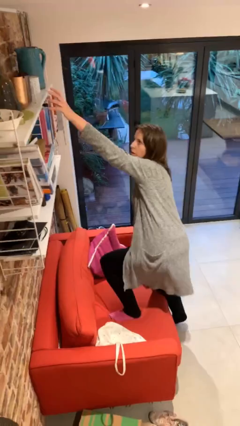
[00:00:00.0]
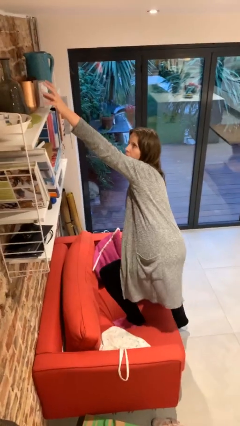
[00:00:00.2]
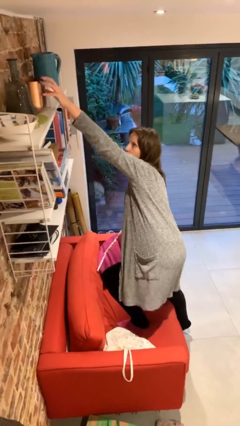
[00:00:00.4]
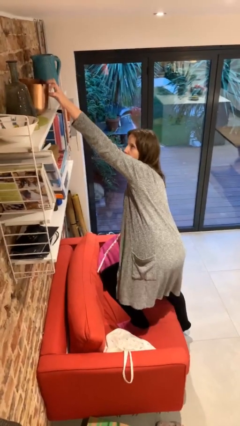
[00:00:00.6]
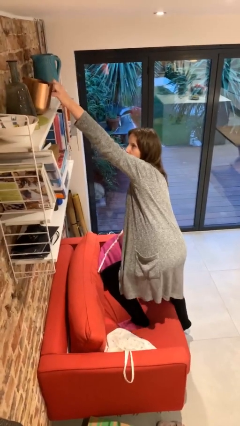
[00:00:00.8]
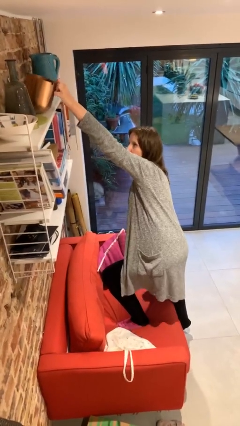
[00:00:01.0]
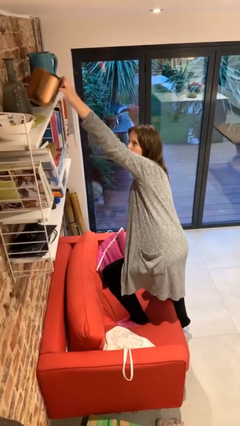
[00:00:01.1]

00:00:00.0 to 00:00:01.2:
person picks up object from shelf

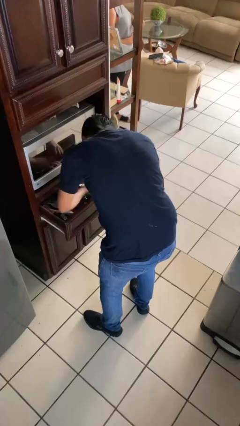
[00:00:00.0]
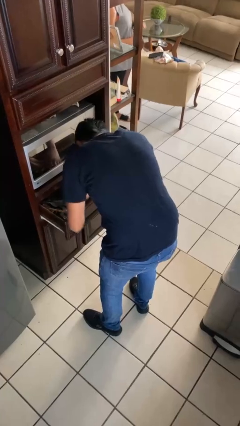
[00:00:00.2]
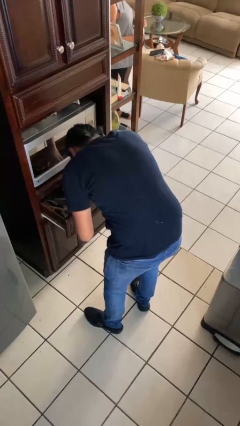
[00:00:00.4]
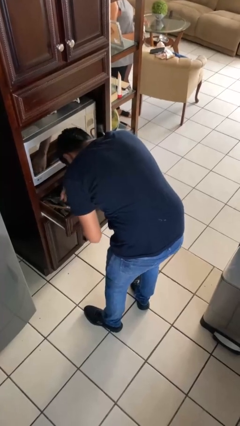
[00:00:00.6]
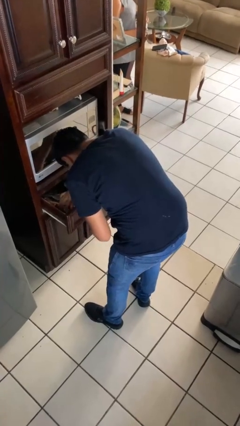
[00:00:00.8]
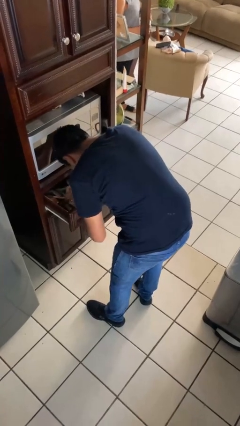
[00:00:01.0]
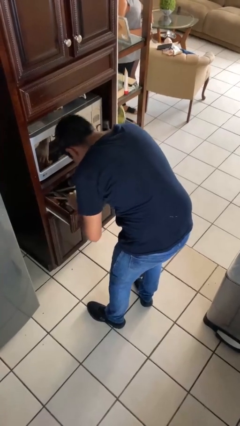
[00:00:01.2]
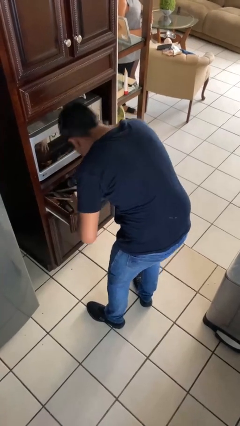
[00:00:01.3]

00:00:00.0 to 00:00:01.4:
person searches in kitchen drawer

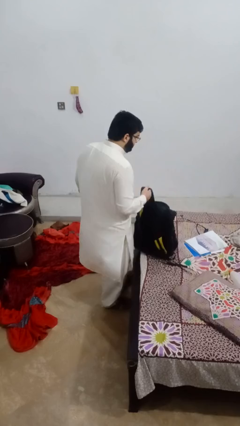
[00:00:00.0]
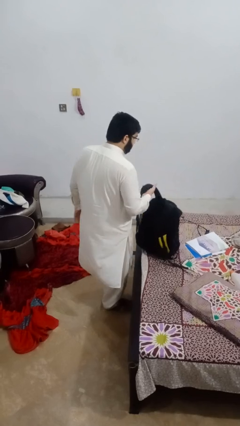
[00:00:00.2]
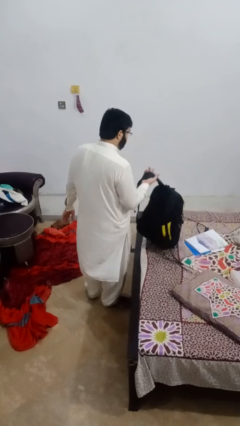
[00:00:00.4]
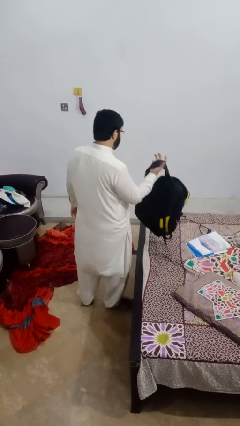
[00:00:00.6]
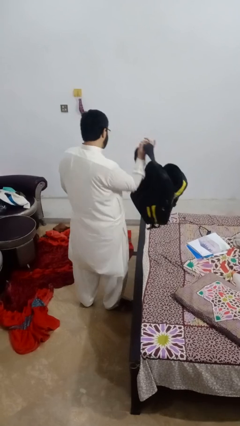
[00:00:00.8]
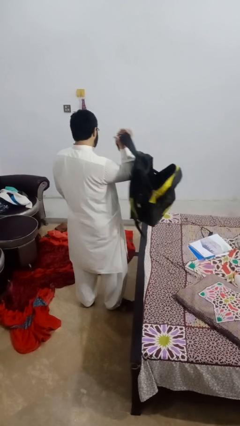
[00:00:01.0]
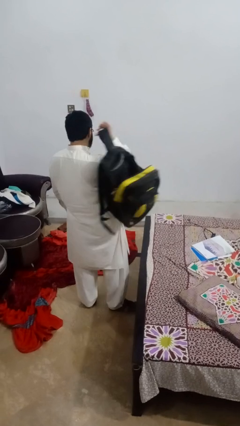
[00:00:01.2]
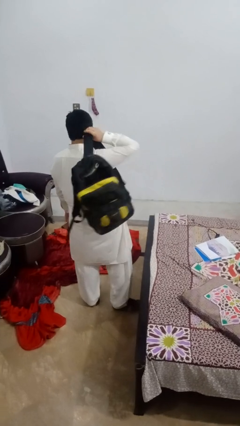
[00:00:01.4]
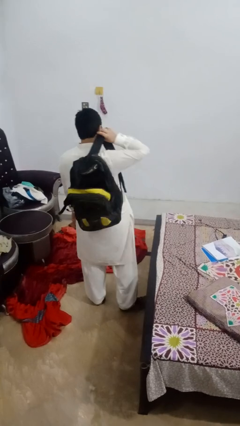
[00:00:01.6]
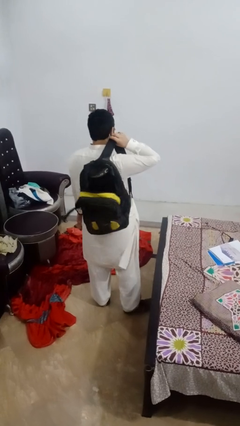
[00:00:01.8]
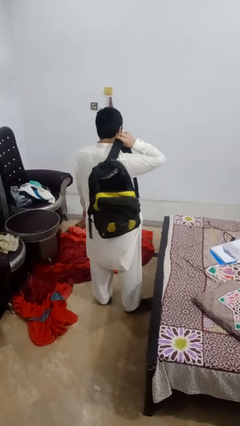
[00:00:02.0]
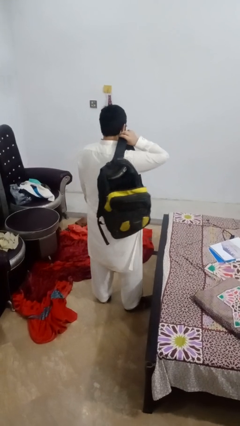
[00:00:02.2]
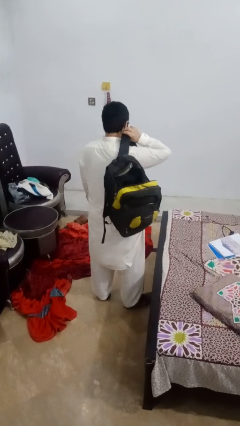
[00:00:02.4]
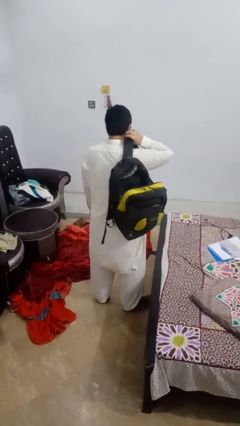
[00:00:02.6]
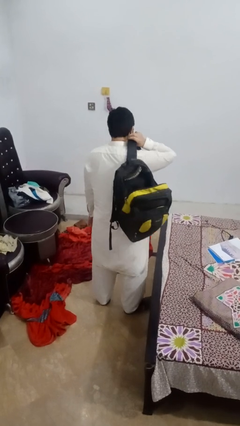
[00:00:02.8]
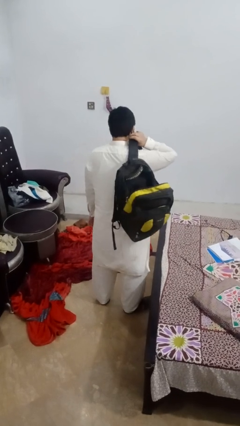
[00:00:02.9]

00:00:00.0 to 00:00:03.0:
person puts object into backpack

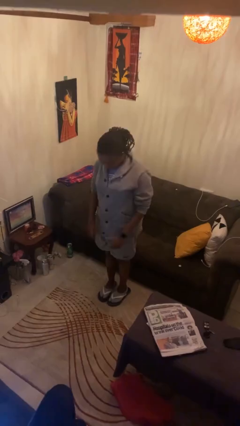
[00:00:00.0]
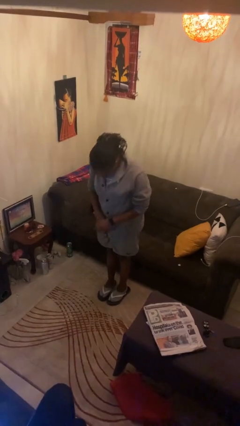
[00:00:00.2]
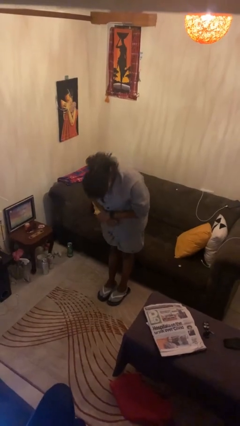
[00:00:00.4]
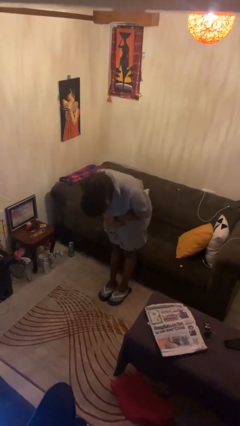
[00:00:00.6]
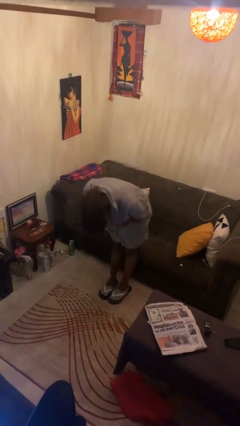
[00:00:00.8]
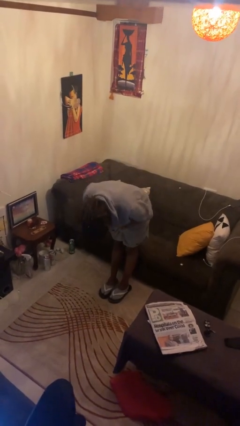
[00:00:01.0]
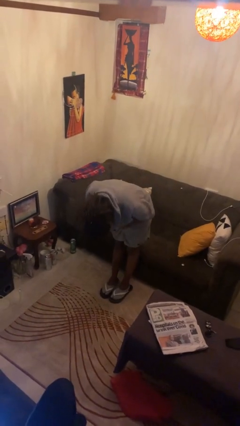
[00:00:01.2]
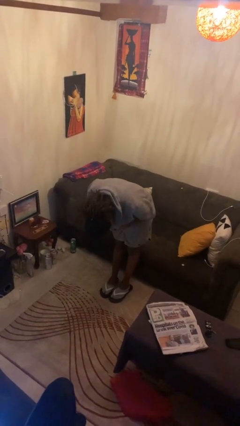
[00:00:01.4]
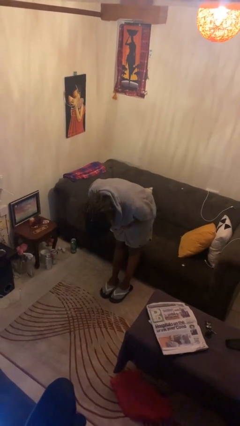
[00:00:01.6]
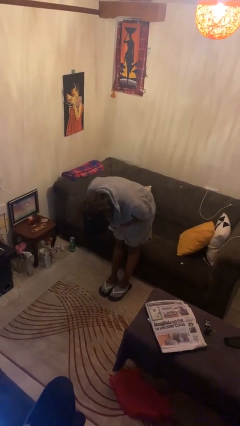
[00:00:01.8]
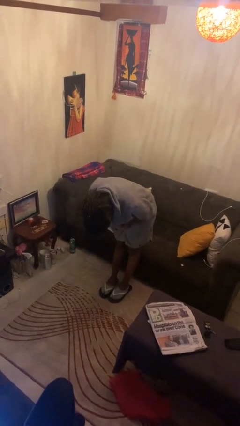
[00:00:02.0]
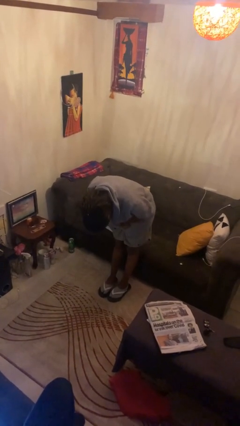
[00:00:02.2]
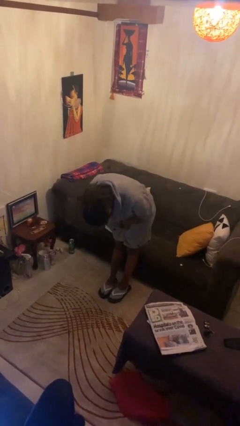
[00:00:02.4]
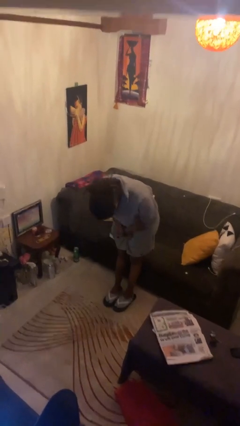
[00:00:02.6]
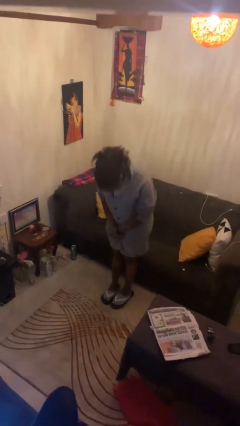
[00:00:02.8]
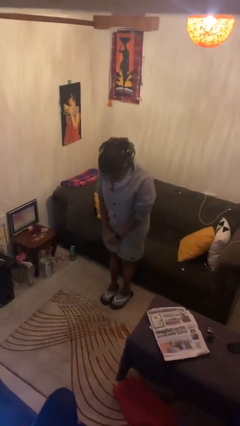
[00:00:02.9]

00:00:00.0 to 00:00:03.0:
person bows

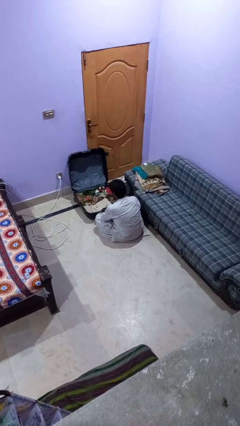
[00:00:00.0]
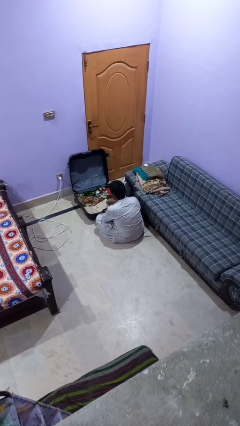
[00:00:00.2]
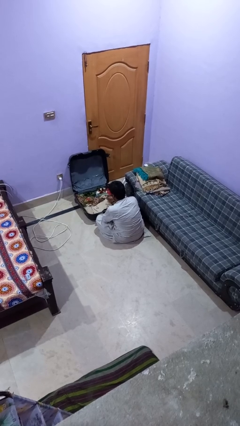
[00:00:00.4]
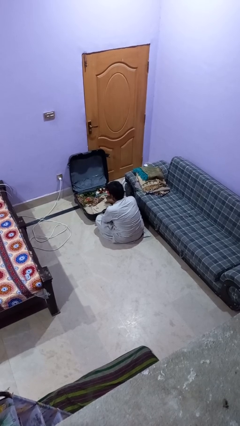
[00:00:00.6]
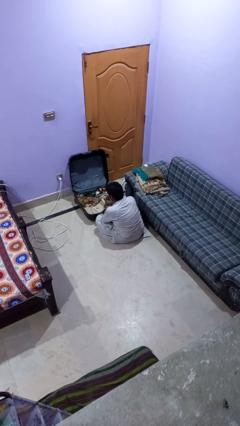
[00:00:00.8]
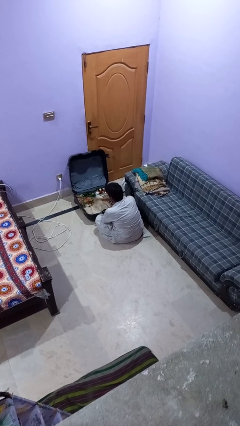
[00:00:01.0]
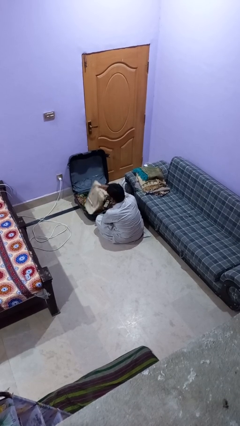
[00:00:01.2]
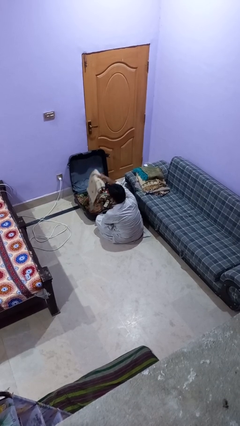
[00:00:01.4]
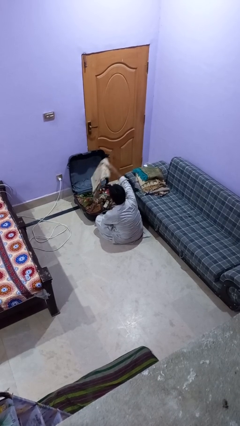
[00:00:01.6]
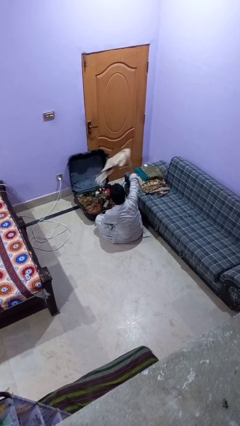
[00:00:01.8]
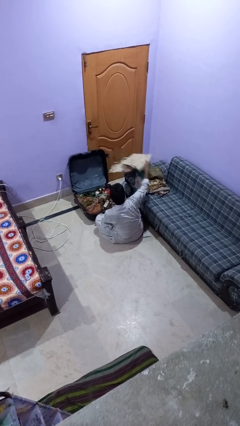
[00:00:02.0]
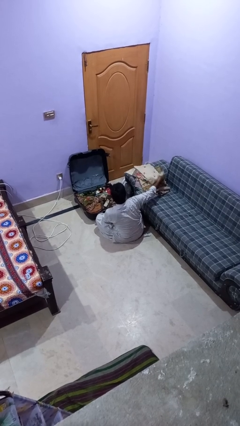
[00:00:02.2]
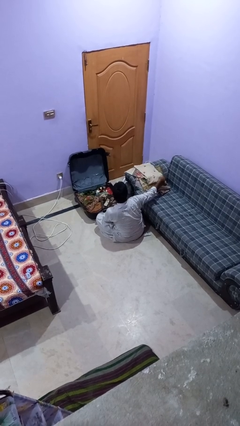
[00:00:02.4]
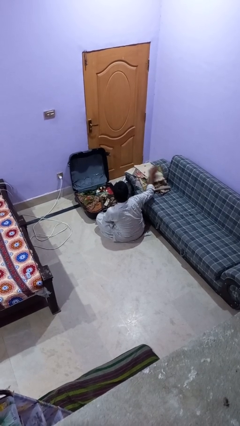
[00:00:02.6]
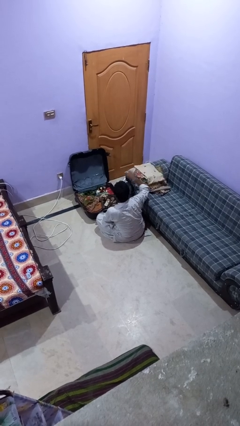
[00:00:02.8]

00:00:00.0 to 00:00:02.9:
person unloads clothes from suitcase

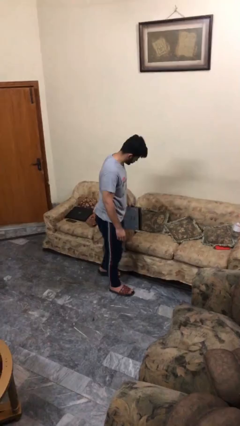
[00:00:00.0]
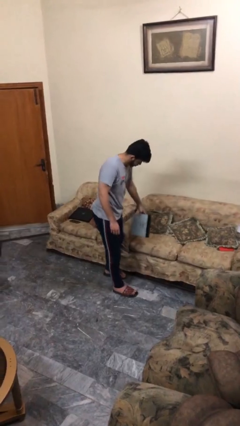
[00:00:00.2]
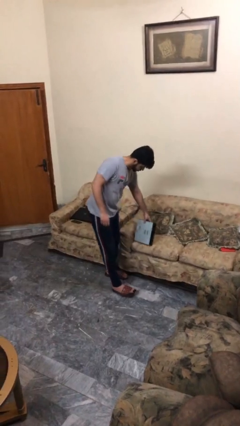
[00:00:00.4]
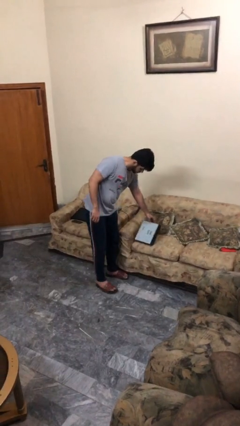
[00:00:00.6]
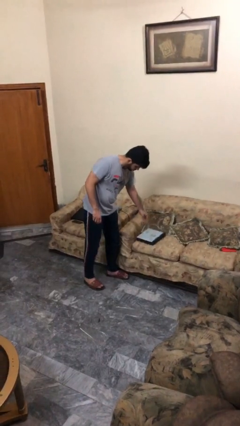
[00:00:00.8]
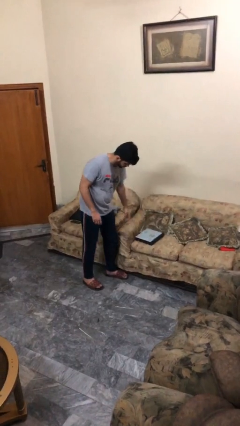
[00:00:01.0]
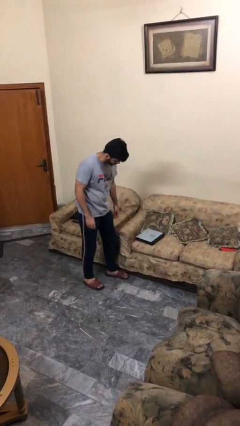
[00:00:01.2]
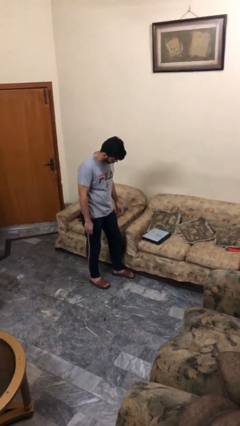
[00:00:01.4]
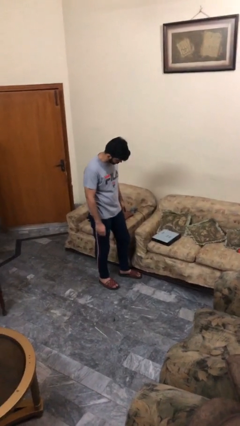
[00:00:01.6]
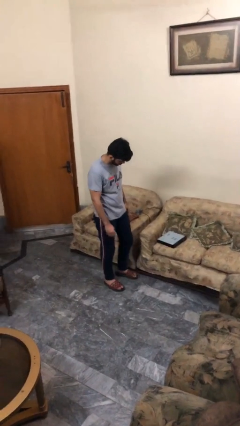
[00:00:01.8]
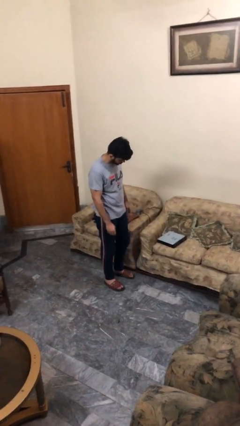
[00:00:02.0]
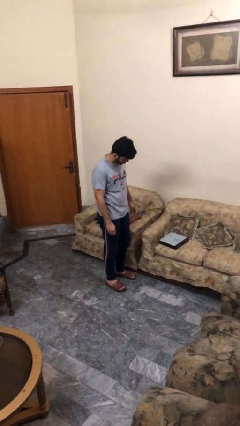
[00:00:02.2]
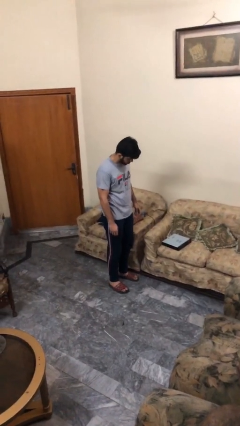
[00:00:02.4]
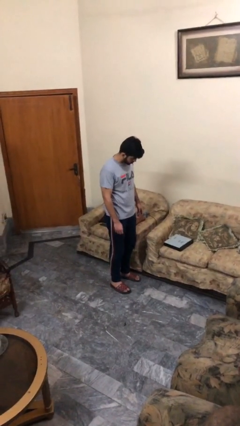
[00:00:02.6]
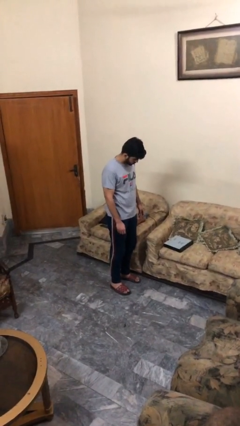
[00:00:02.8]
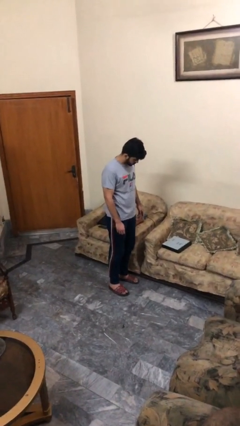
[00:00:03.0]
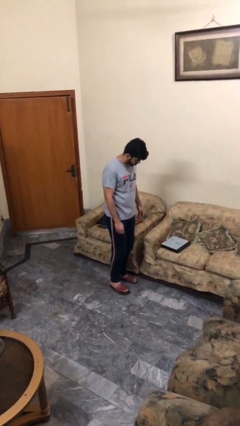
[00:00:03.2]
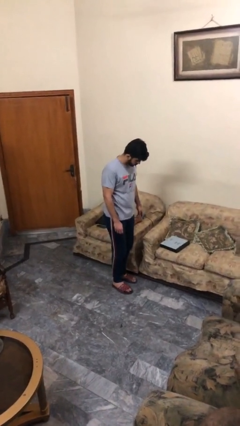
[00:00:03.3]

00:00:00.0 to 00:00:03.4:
person puts down object on couch

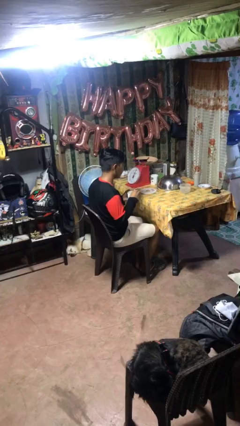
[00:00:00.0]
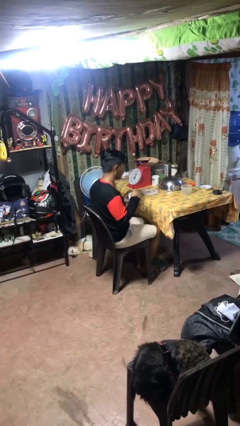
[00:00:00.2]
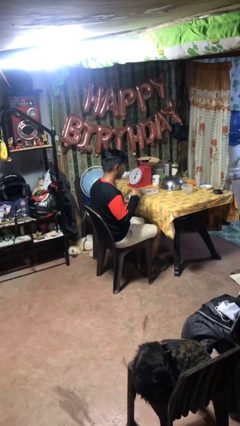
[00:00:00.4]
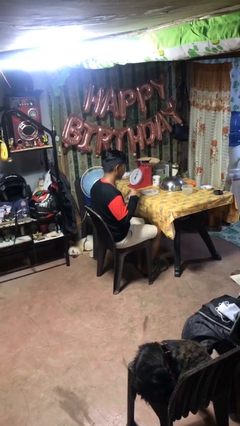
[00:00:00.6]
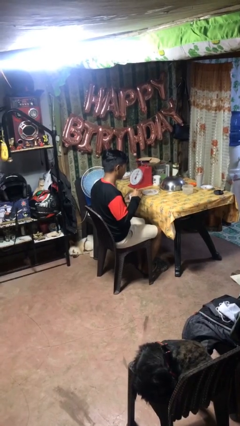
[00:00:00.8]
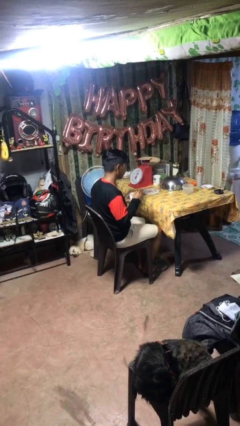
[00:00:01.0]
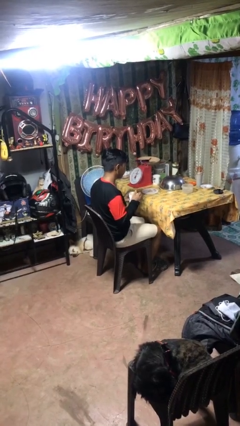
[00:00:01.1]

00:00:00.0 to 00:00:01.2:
person stirs mug

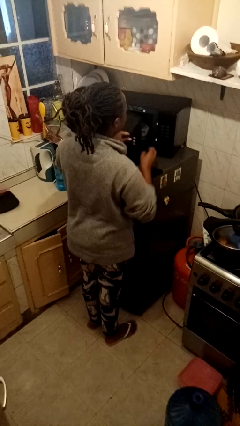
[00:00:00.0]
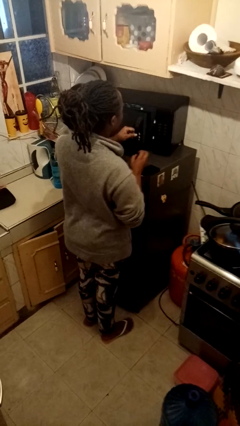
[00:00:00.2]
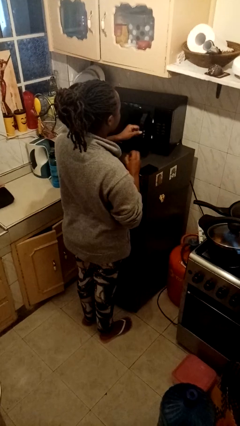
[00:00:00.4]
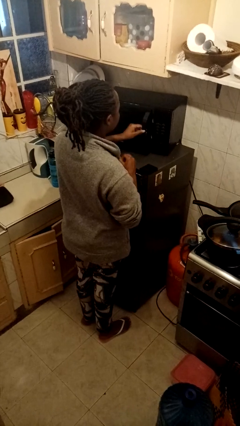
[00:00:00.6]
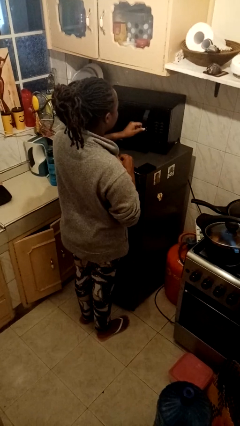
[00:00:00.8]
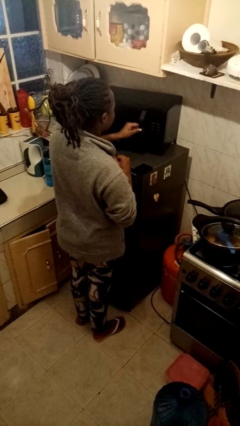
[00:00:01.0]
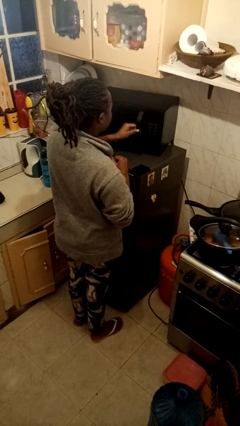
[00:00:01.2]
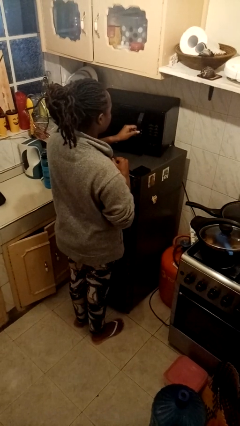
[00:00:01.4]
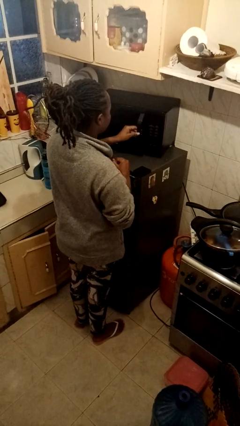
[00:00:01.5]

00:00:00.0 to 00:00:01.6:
person closes microwave
